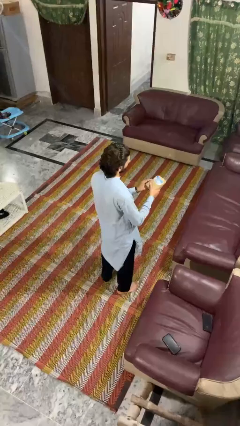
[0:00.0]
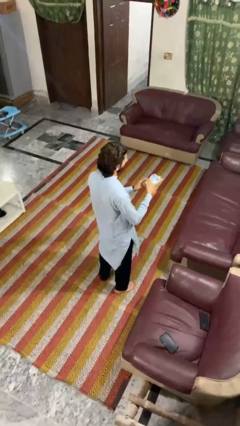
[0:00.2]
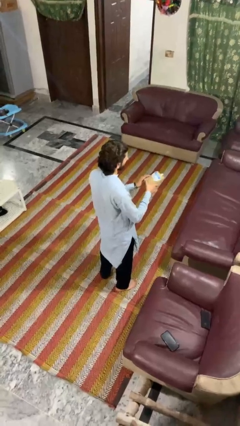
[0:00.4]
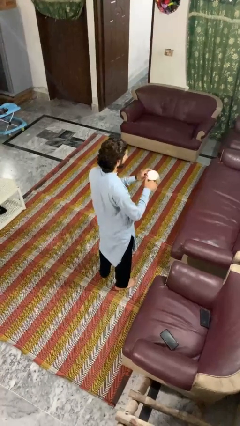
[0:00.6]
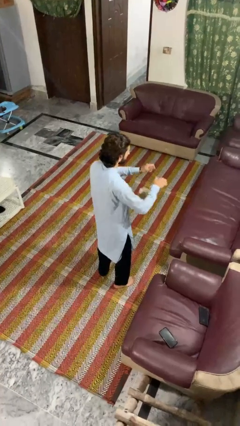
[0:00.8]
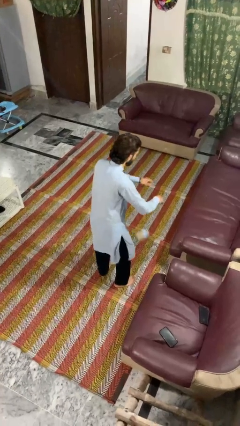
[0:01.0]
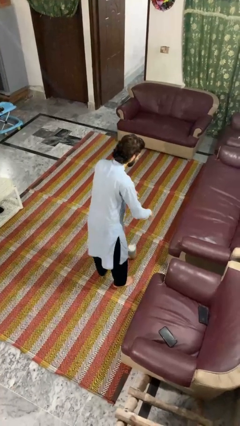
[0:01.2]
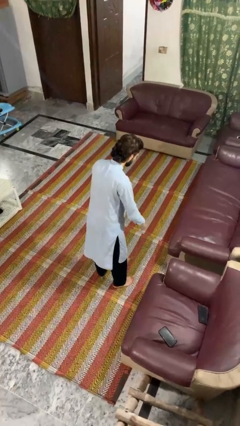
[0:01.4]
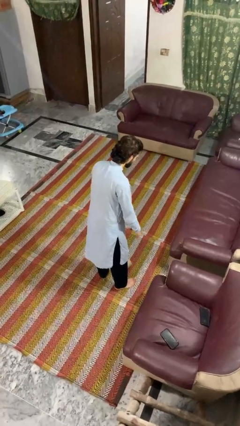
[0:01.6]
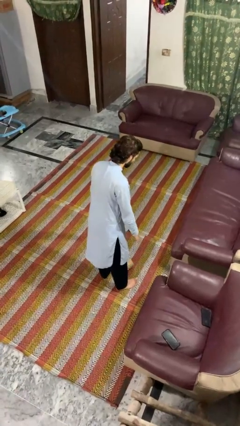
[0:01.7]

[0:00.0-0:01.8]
person drops object

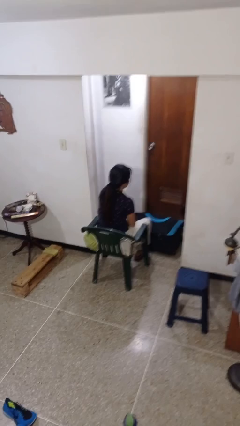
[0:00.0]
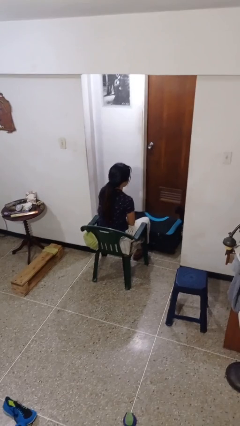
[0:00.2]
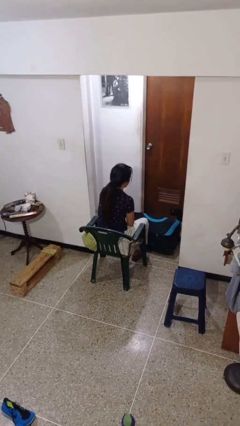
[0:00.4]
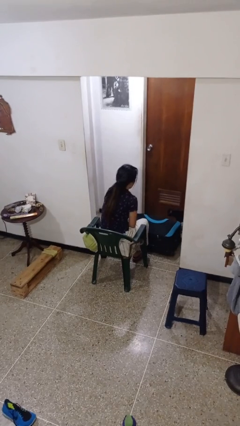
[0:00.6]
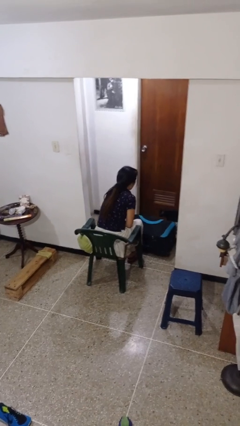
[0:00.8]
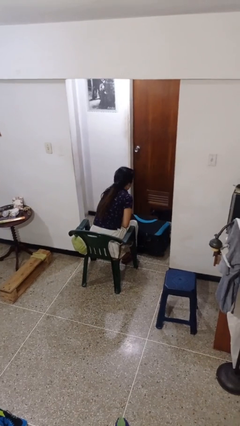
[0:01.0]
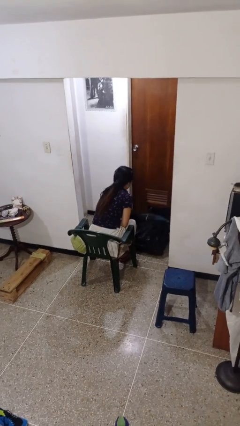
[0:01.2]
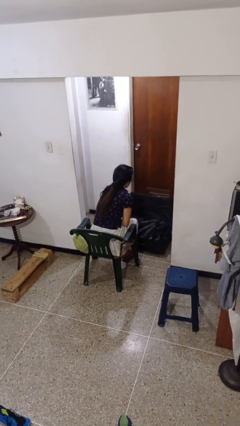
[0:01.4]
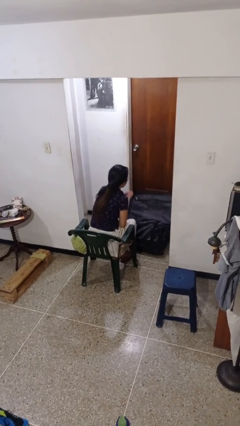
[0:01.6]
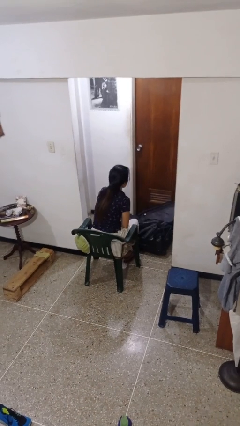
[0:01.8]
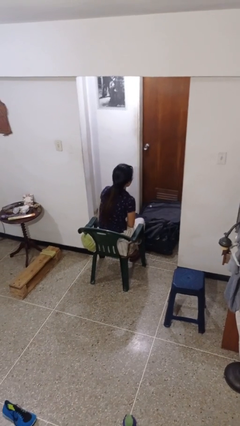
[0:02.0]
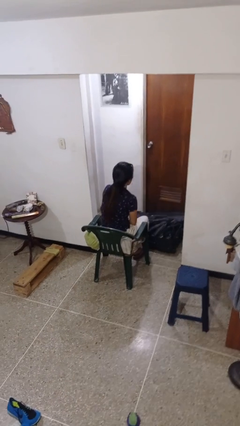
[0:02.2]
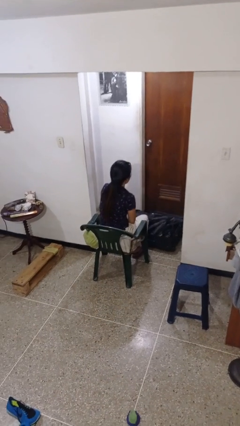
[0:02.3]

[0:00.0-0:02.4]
person opens suitcase

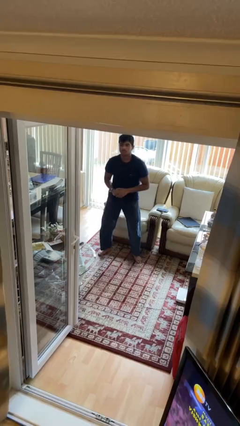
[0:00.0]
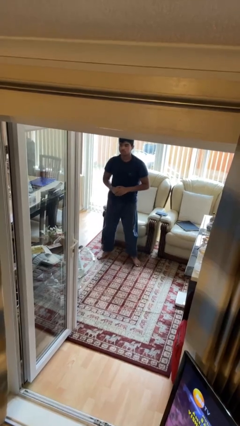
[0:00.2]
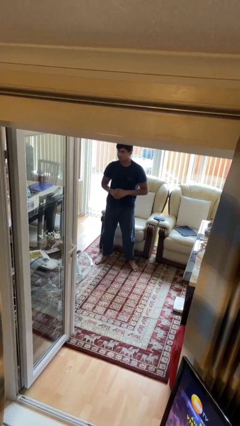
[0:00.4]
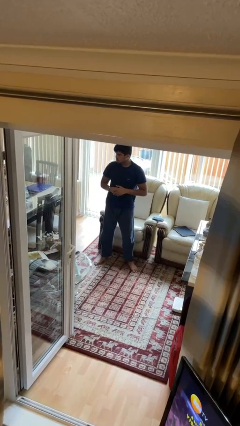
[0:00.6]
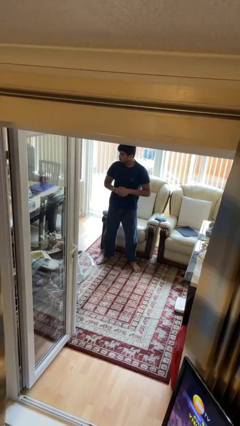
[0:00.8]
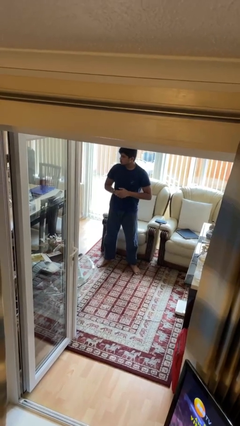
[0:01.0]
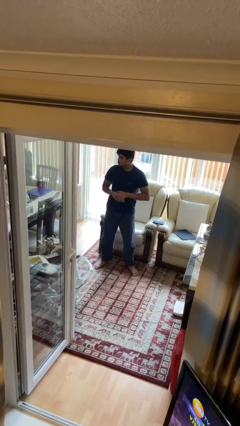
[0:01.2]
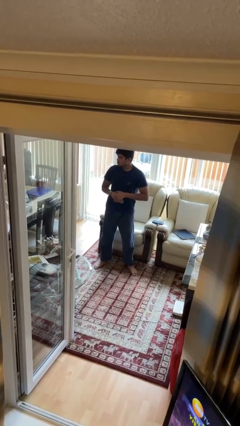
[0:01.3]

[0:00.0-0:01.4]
person stands up

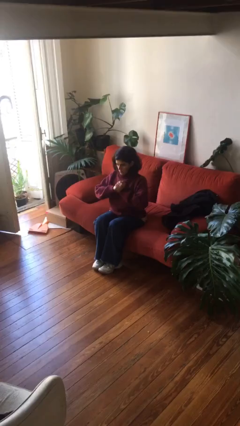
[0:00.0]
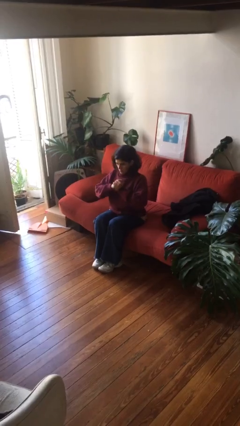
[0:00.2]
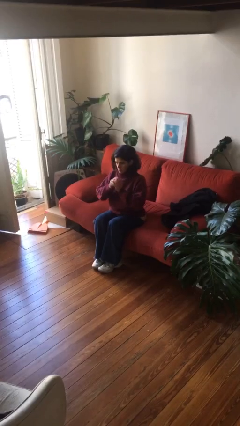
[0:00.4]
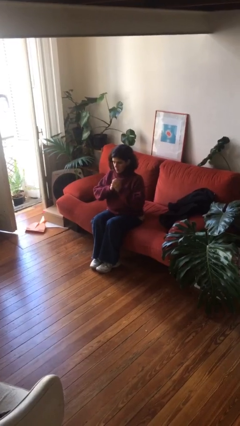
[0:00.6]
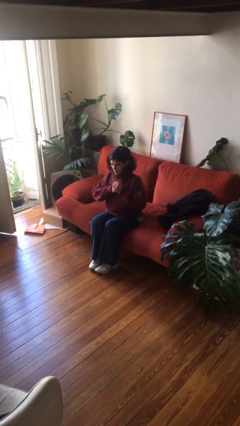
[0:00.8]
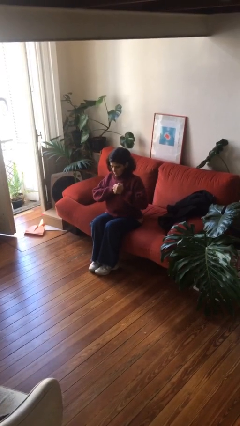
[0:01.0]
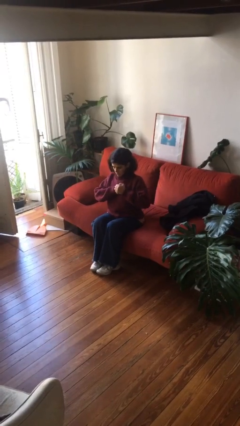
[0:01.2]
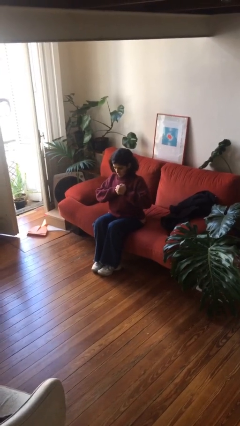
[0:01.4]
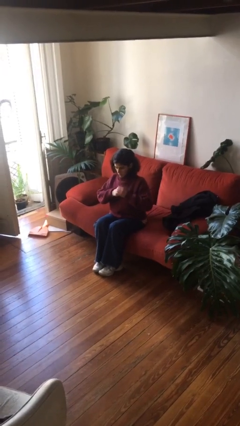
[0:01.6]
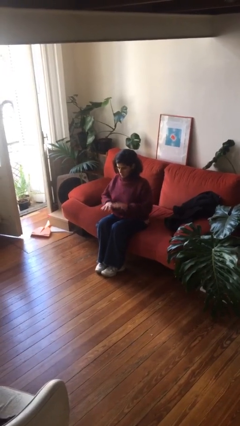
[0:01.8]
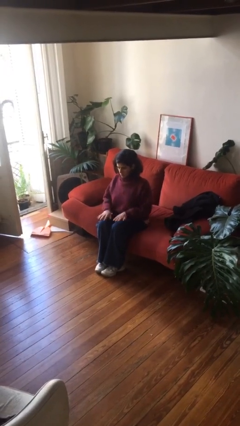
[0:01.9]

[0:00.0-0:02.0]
person cracks knuckles

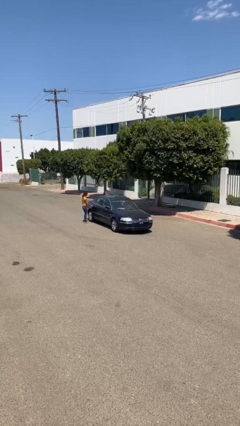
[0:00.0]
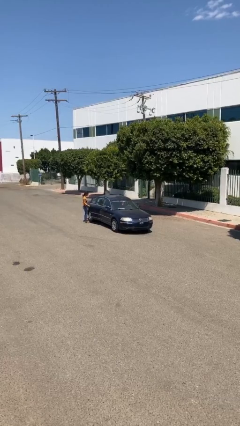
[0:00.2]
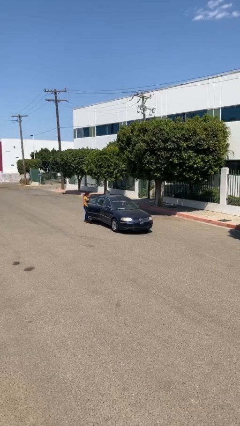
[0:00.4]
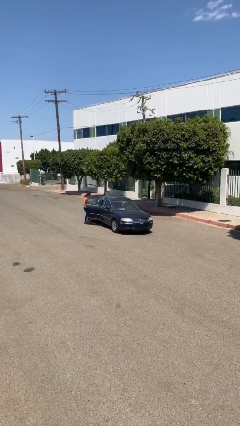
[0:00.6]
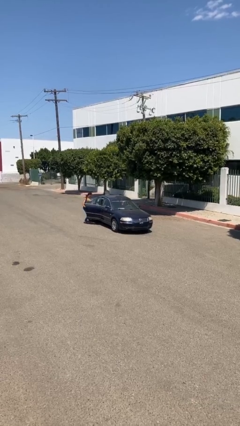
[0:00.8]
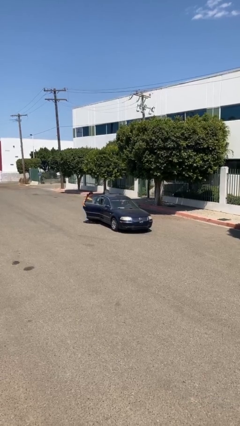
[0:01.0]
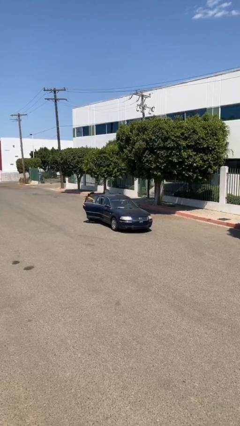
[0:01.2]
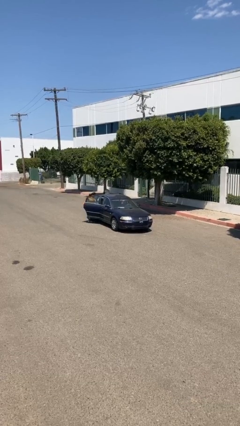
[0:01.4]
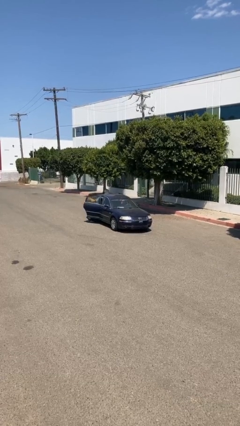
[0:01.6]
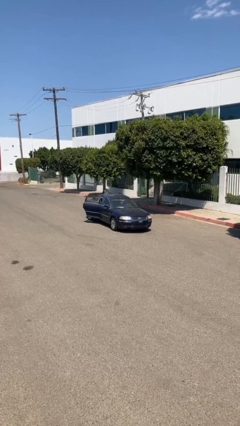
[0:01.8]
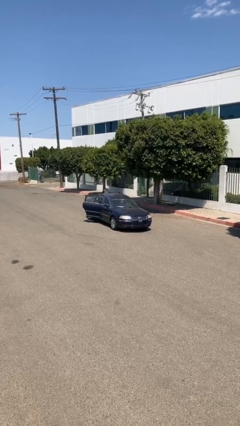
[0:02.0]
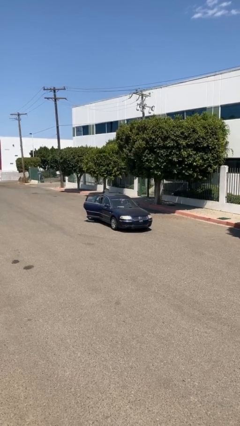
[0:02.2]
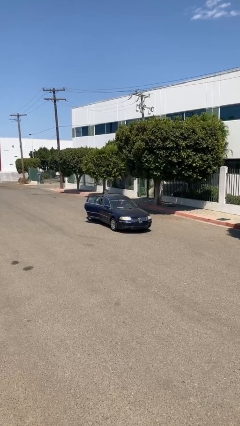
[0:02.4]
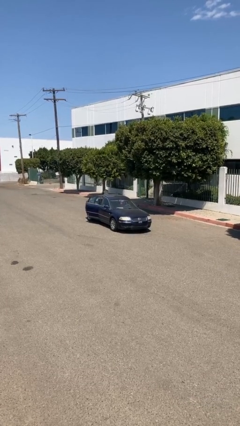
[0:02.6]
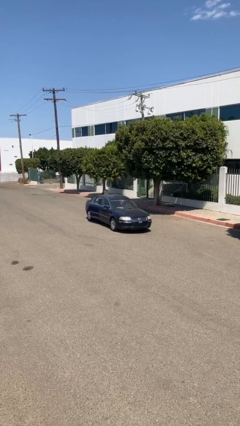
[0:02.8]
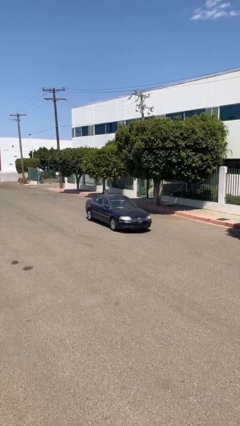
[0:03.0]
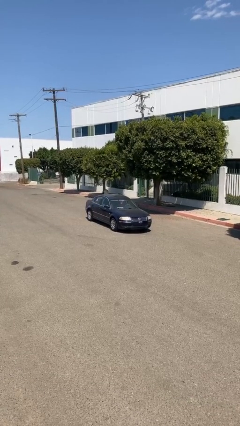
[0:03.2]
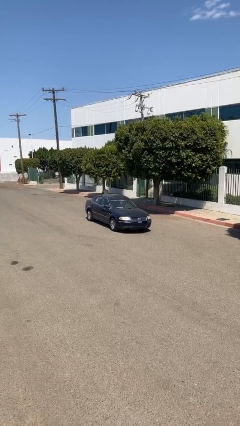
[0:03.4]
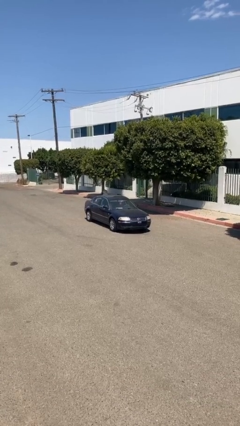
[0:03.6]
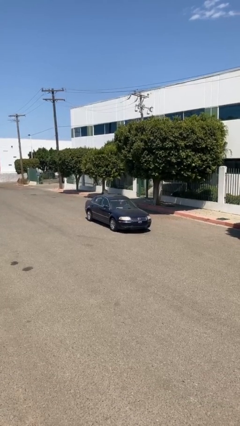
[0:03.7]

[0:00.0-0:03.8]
car picks up person

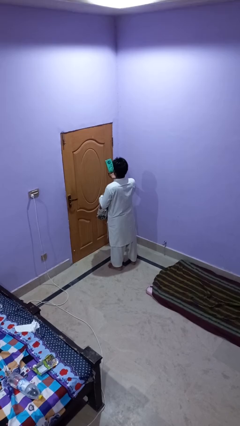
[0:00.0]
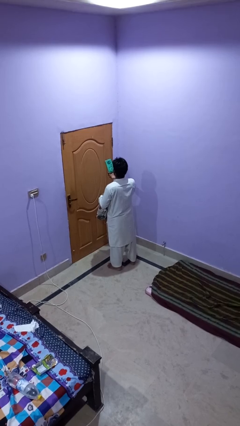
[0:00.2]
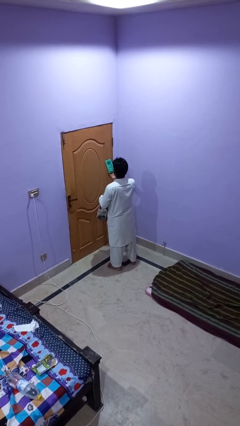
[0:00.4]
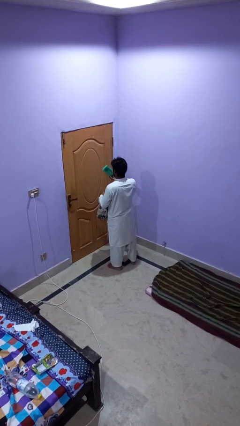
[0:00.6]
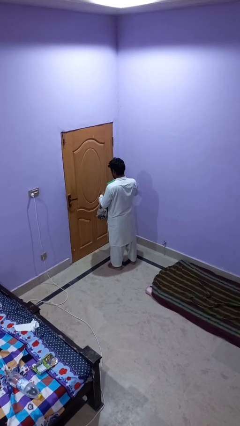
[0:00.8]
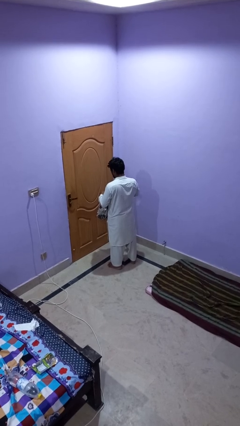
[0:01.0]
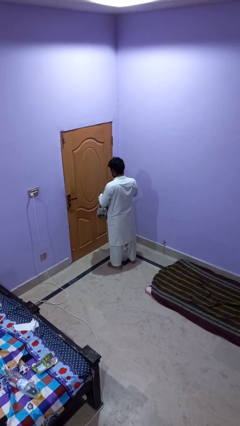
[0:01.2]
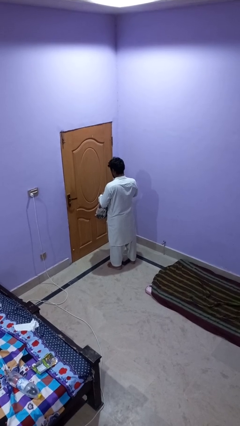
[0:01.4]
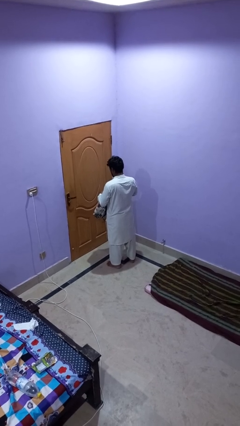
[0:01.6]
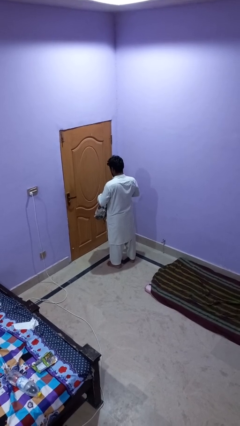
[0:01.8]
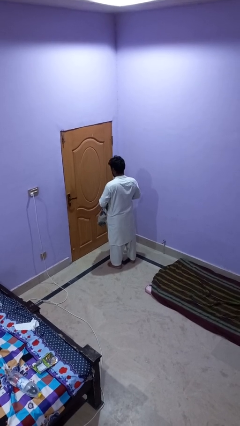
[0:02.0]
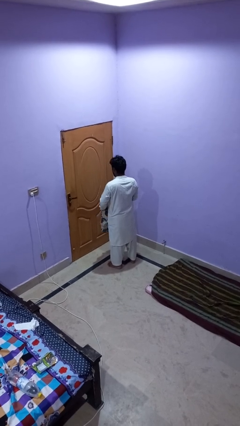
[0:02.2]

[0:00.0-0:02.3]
person puts object into backpack

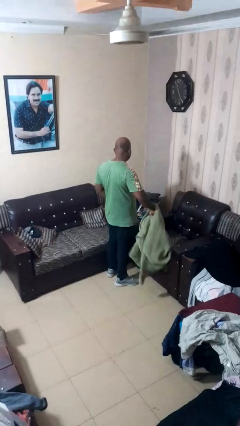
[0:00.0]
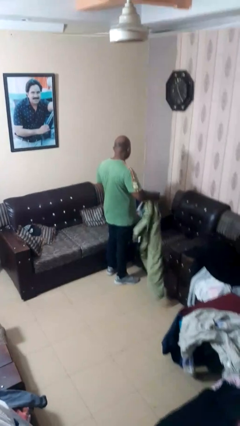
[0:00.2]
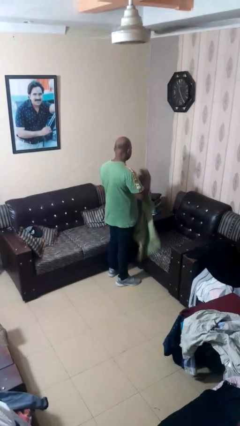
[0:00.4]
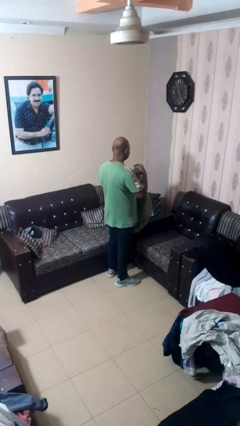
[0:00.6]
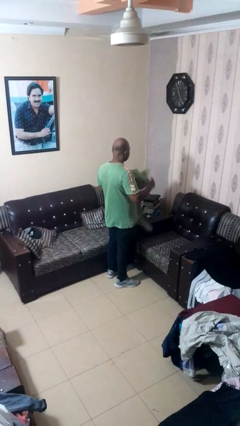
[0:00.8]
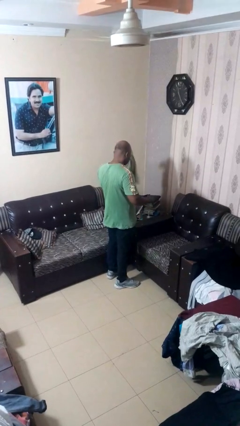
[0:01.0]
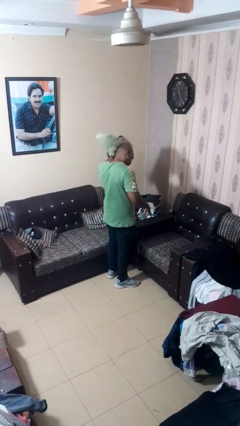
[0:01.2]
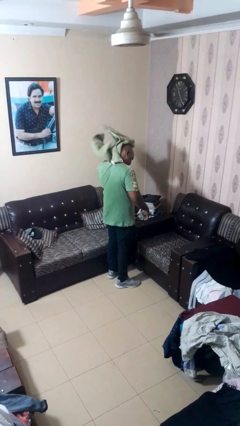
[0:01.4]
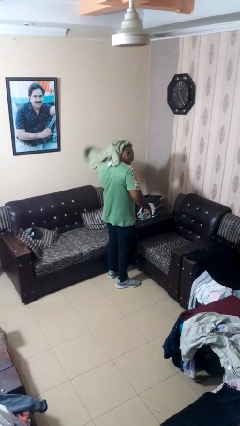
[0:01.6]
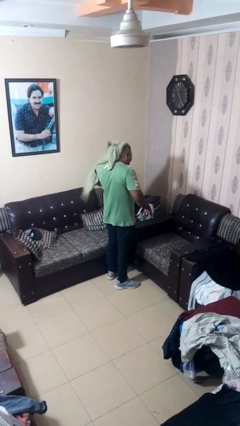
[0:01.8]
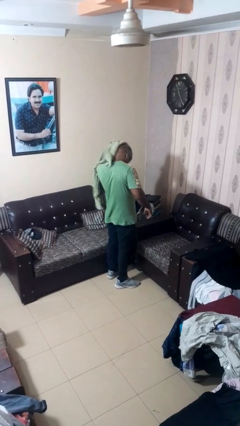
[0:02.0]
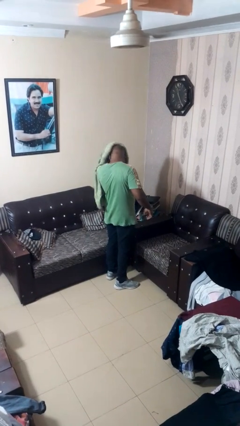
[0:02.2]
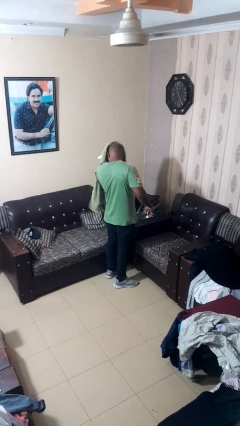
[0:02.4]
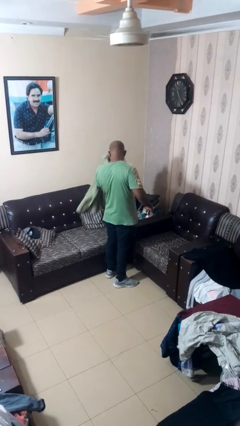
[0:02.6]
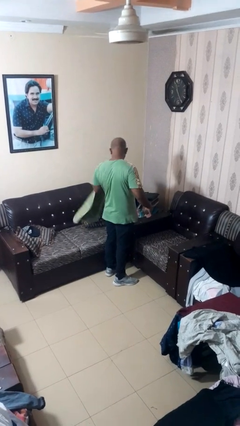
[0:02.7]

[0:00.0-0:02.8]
person dries hair with towel

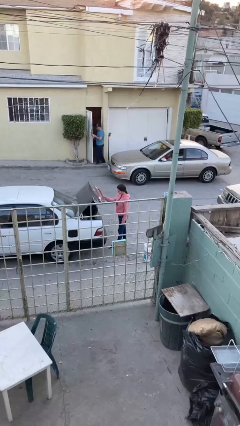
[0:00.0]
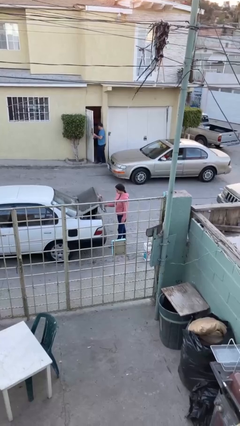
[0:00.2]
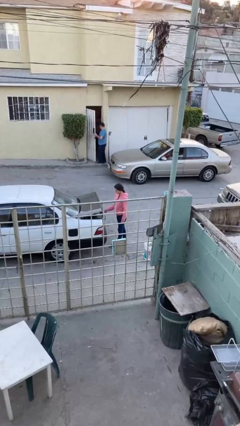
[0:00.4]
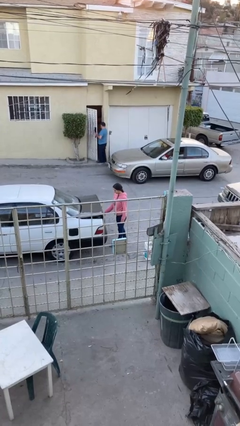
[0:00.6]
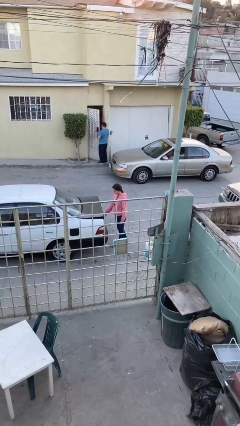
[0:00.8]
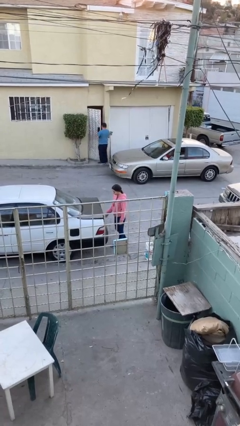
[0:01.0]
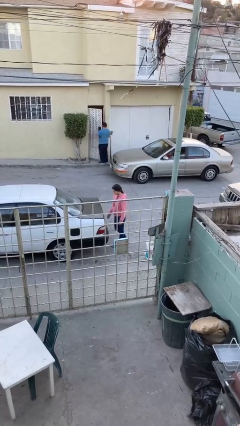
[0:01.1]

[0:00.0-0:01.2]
person closes car trunk
